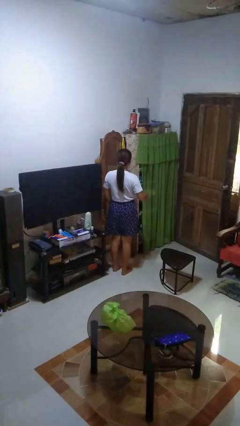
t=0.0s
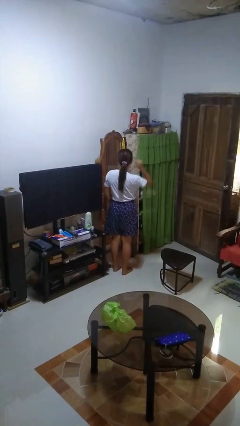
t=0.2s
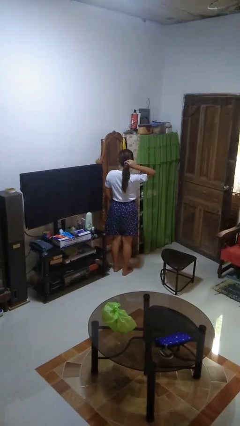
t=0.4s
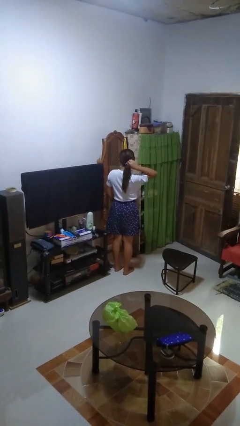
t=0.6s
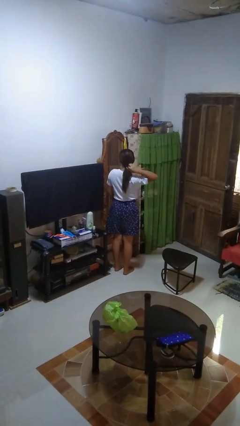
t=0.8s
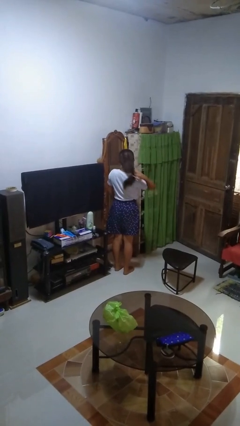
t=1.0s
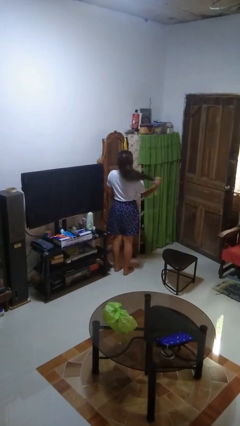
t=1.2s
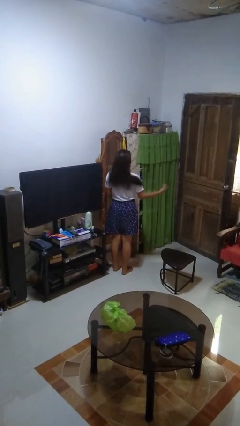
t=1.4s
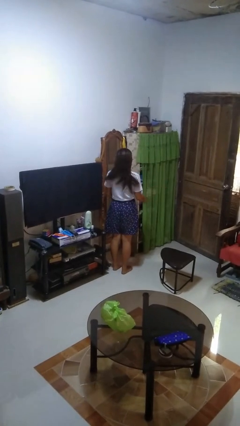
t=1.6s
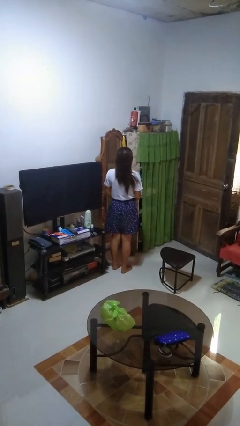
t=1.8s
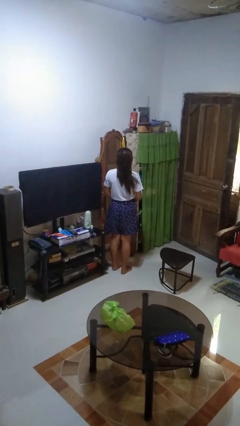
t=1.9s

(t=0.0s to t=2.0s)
person takes off hairtie

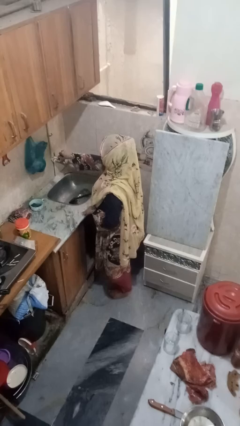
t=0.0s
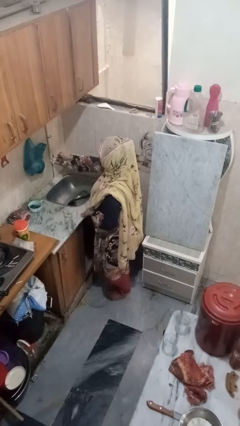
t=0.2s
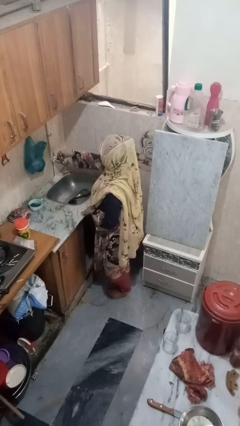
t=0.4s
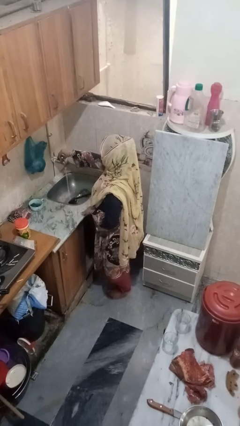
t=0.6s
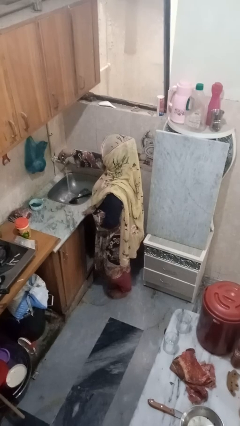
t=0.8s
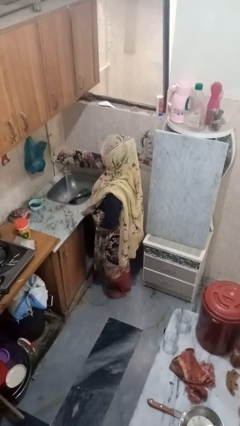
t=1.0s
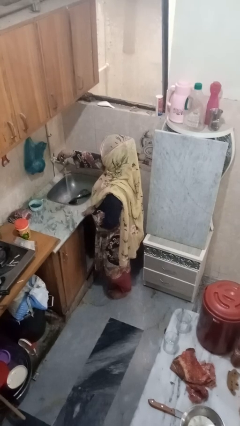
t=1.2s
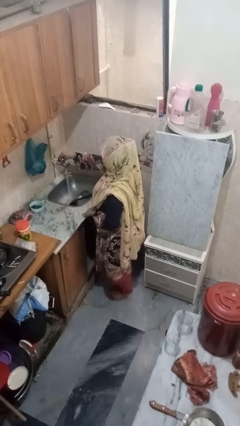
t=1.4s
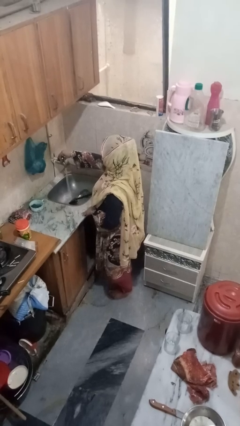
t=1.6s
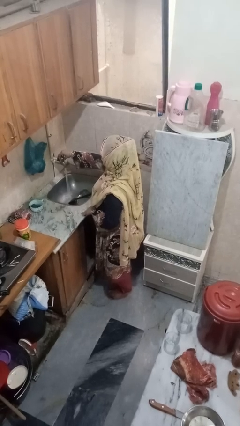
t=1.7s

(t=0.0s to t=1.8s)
person turns on faucet

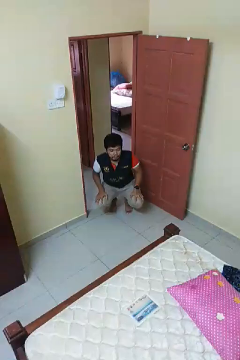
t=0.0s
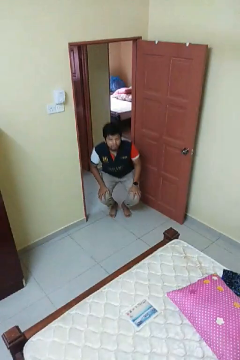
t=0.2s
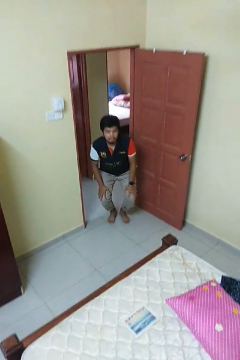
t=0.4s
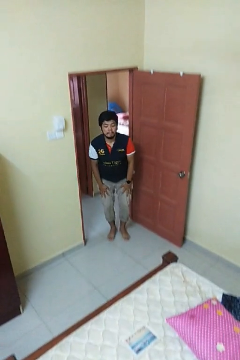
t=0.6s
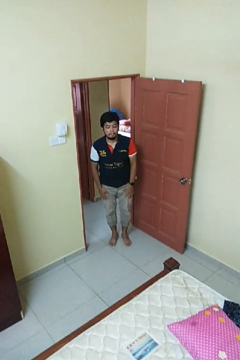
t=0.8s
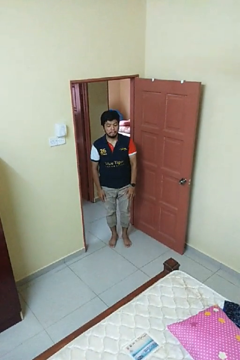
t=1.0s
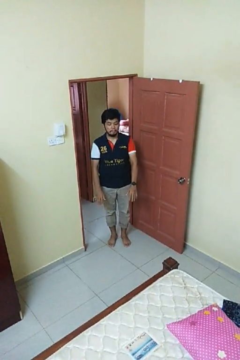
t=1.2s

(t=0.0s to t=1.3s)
person stands up

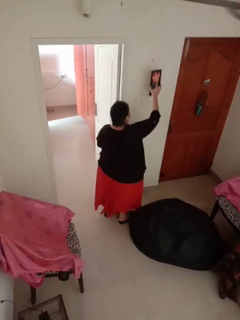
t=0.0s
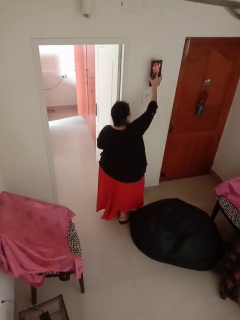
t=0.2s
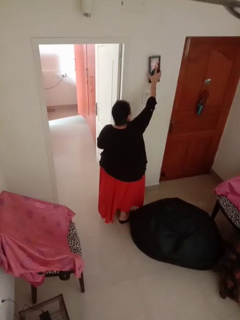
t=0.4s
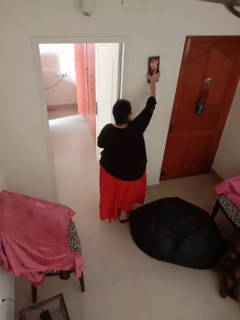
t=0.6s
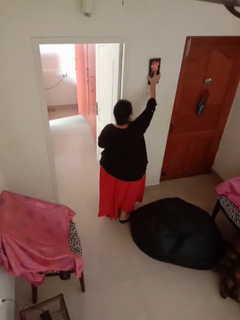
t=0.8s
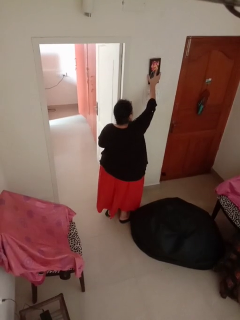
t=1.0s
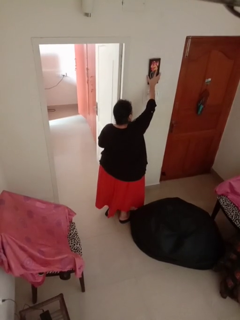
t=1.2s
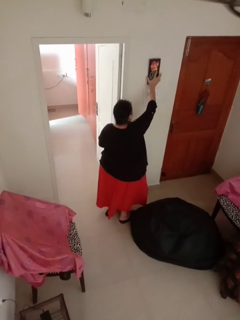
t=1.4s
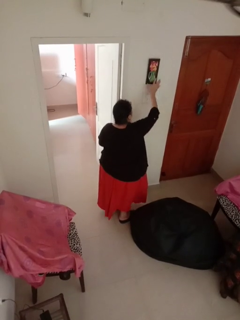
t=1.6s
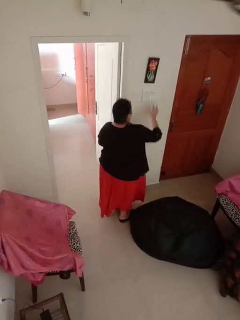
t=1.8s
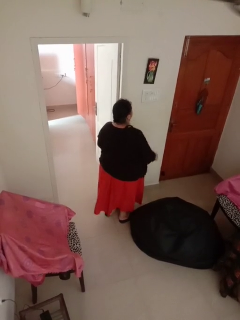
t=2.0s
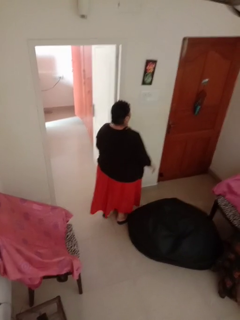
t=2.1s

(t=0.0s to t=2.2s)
person puts up picture frame

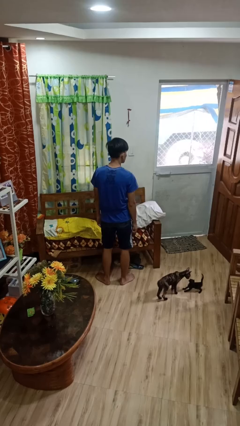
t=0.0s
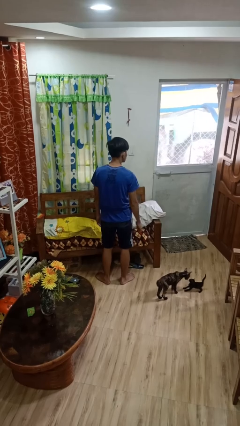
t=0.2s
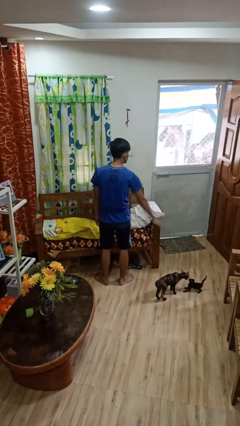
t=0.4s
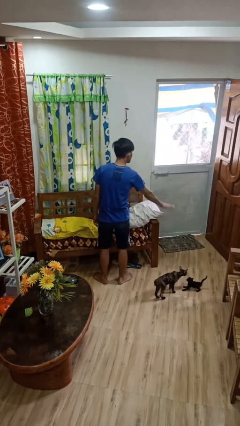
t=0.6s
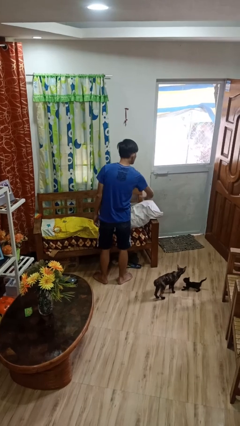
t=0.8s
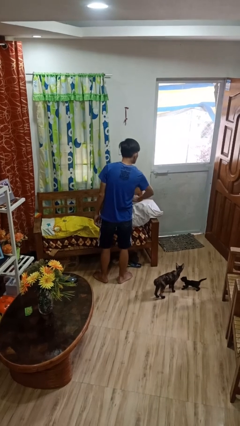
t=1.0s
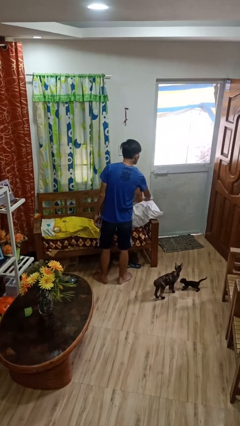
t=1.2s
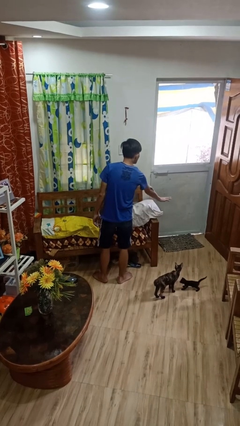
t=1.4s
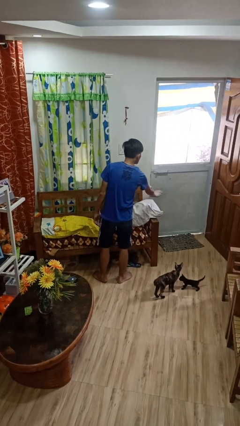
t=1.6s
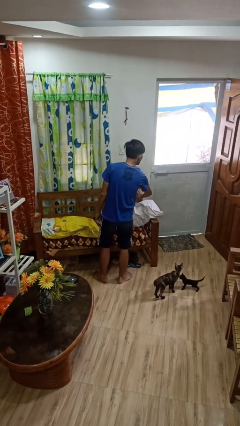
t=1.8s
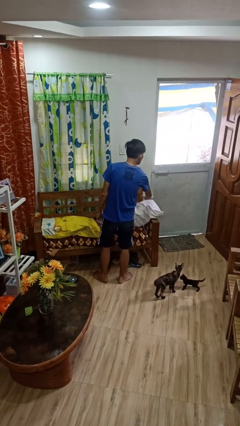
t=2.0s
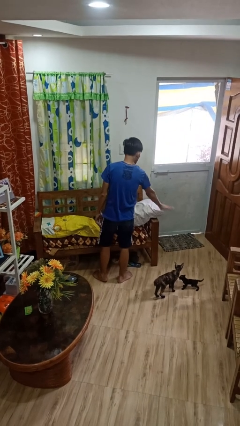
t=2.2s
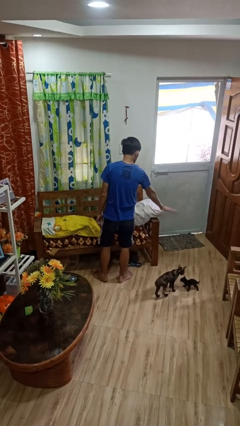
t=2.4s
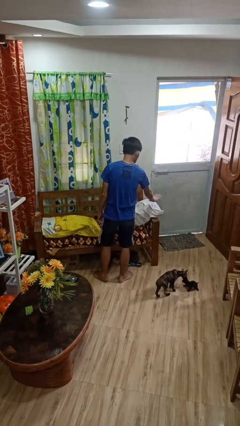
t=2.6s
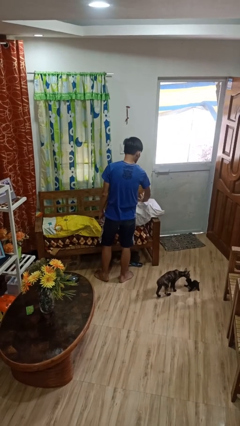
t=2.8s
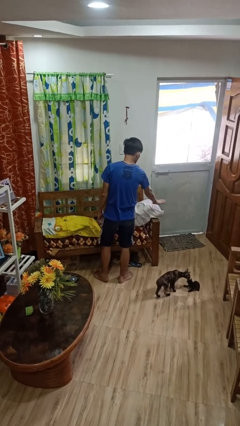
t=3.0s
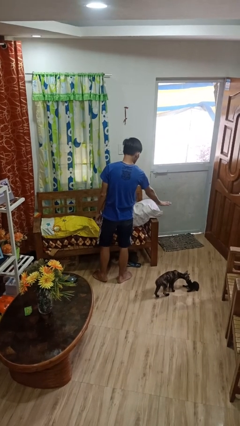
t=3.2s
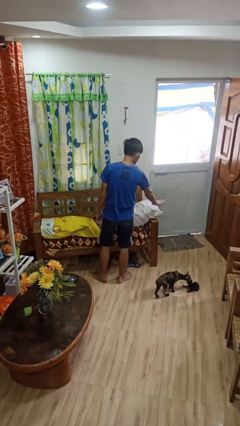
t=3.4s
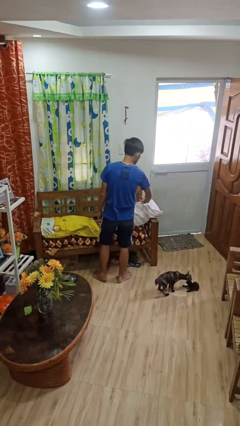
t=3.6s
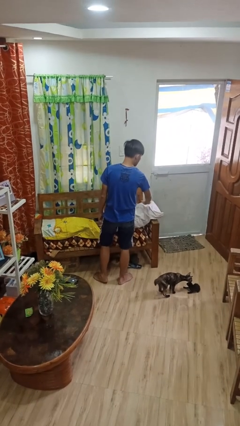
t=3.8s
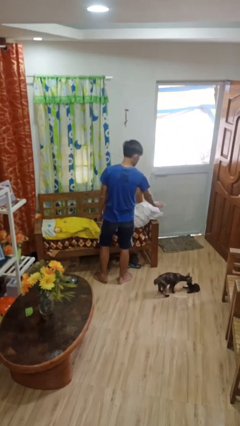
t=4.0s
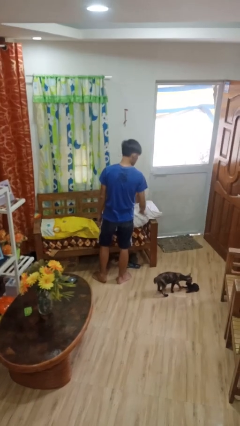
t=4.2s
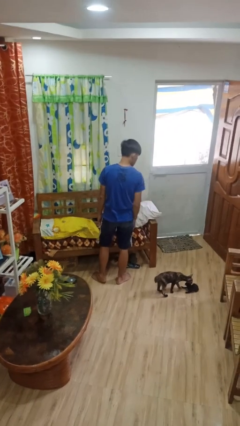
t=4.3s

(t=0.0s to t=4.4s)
person waves hand over object

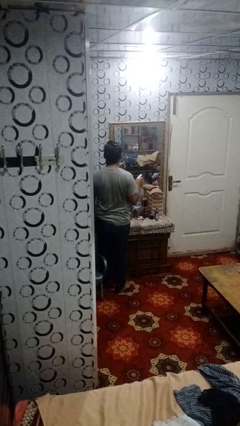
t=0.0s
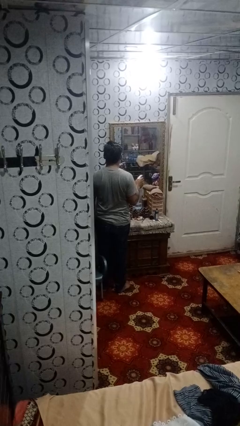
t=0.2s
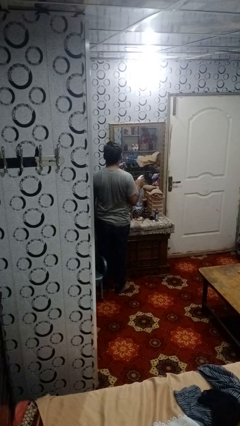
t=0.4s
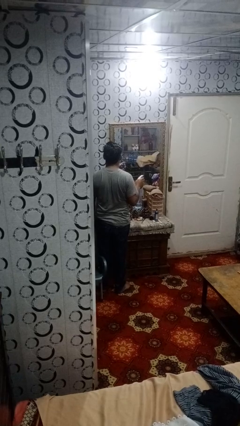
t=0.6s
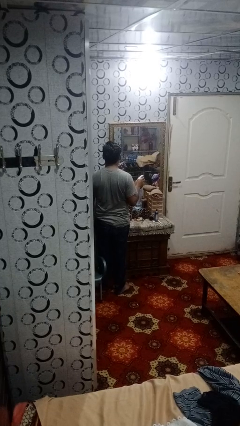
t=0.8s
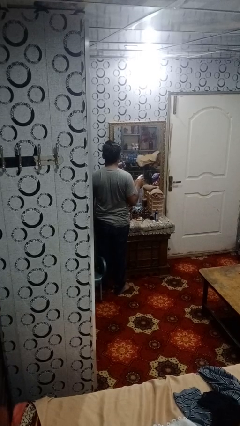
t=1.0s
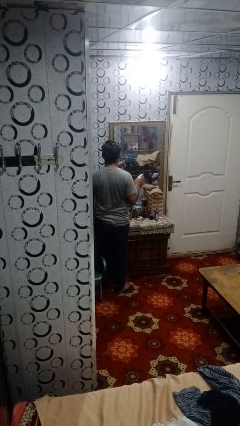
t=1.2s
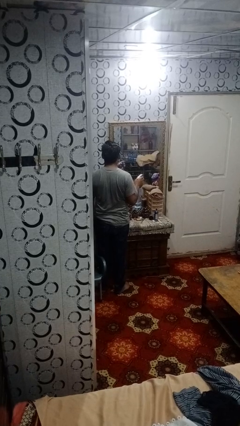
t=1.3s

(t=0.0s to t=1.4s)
person sprays from bottle

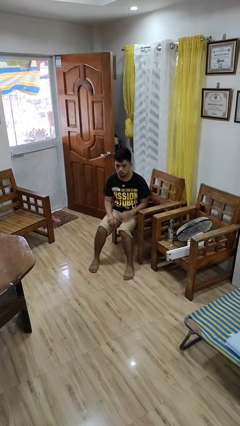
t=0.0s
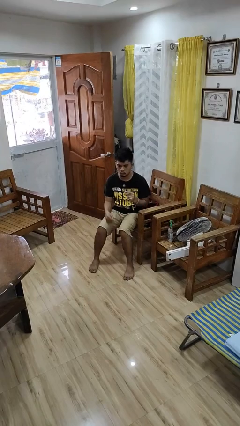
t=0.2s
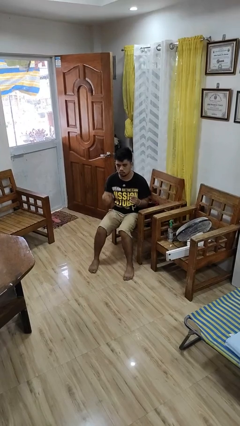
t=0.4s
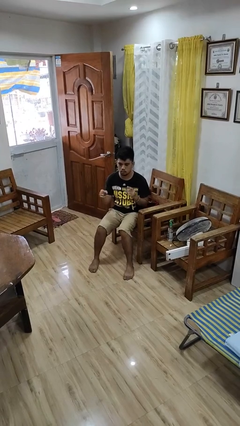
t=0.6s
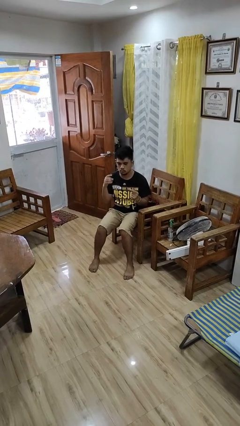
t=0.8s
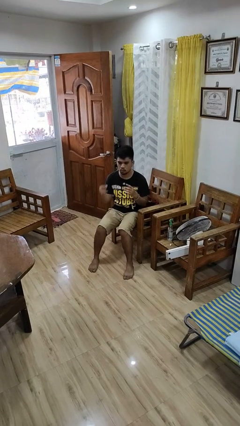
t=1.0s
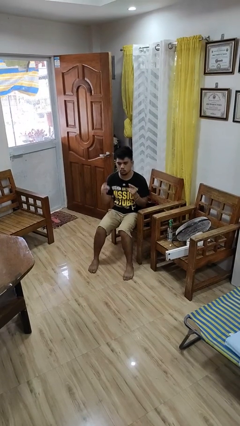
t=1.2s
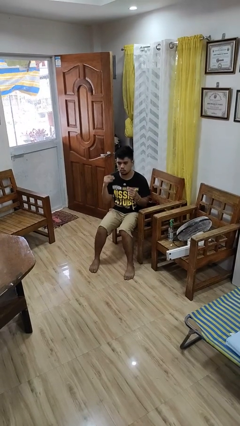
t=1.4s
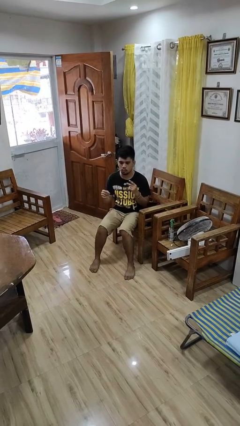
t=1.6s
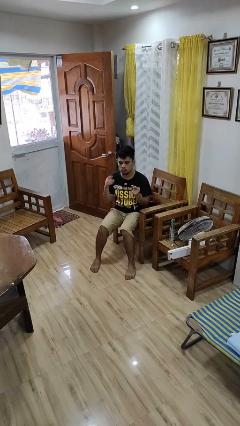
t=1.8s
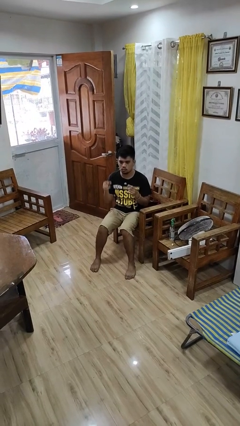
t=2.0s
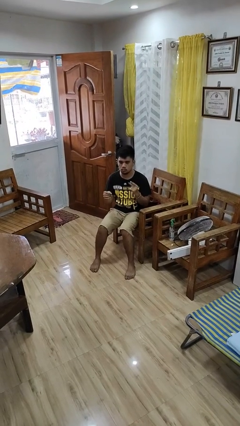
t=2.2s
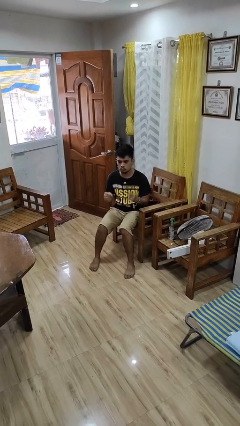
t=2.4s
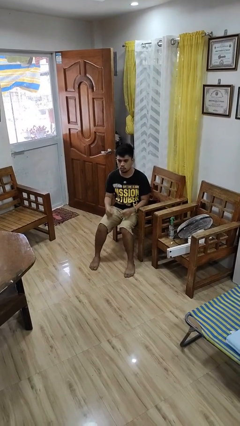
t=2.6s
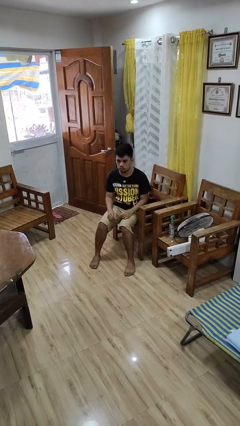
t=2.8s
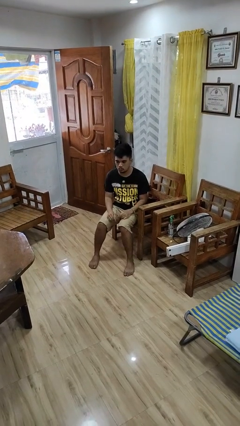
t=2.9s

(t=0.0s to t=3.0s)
person snaps fingers

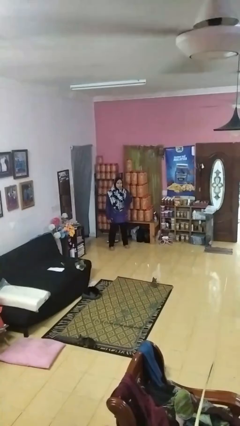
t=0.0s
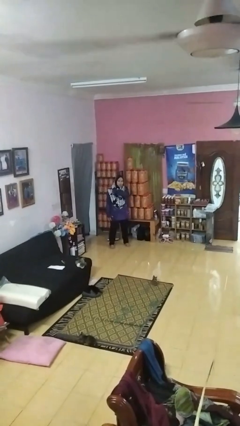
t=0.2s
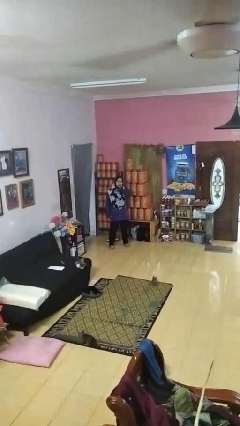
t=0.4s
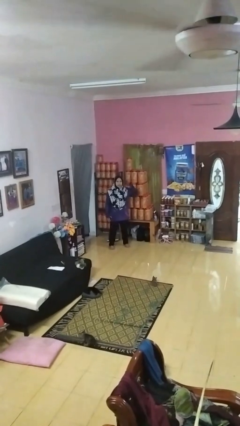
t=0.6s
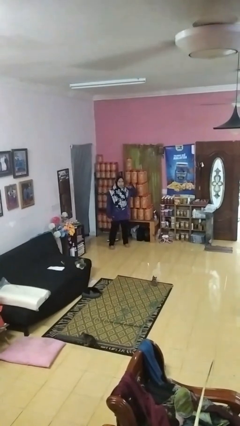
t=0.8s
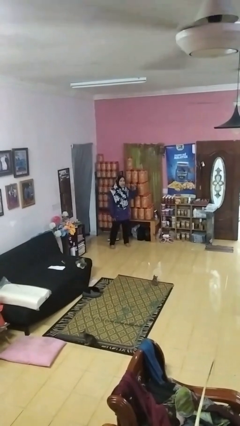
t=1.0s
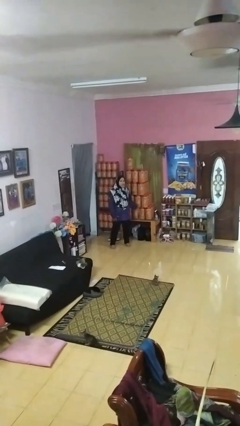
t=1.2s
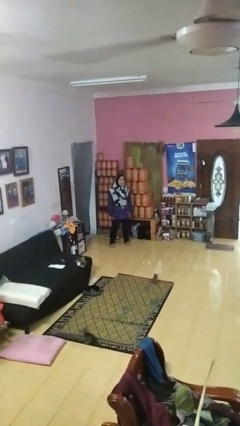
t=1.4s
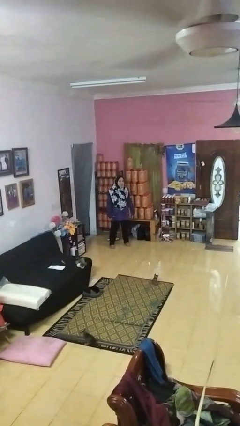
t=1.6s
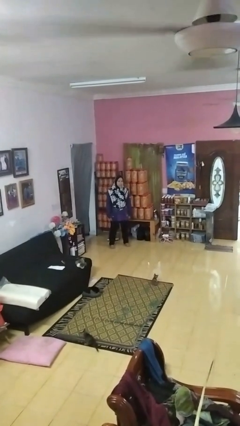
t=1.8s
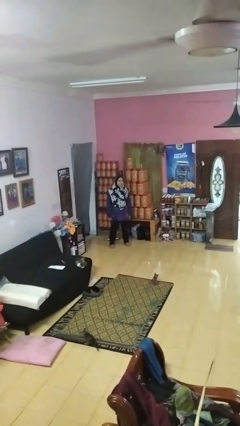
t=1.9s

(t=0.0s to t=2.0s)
person gestures cut
